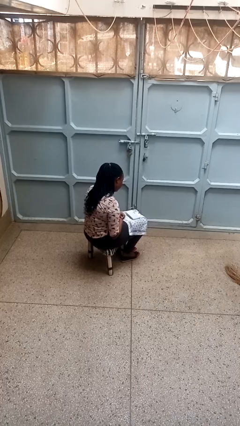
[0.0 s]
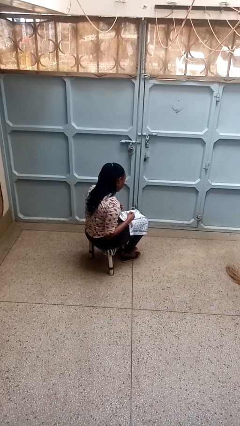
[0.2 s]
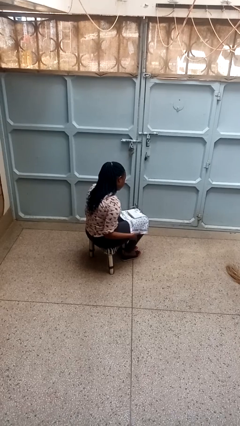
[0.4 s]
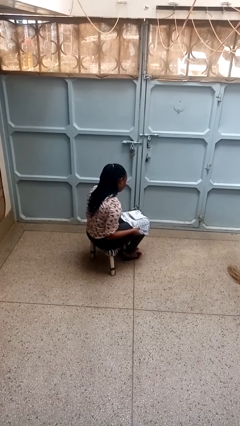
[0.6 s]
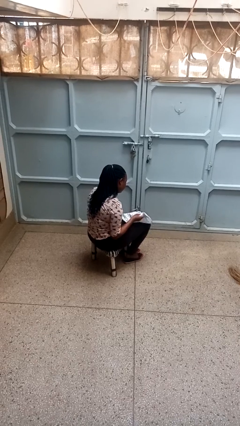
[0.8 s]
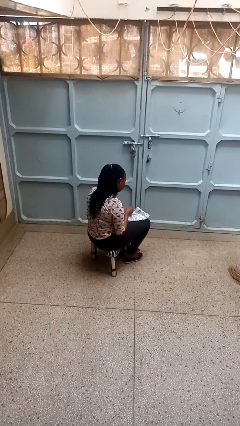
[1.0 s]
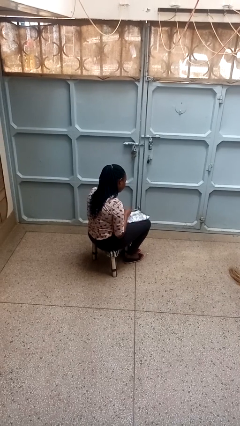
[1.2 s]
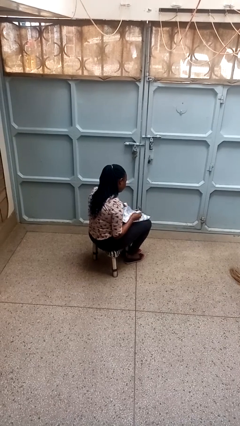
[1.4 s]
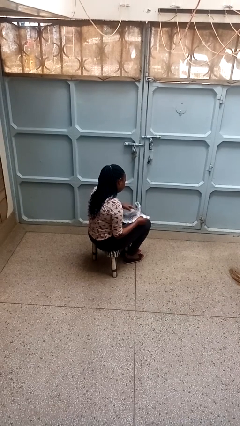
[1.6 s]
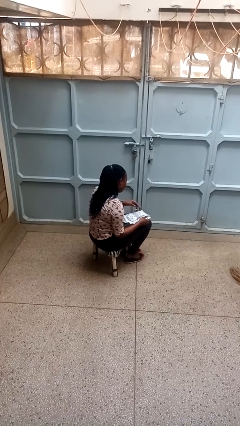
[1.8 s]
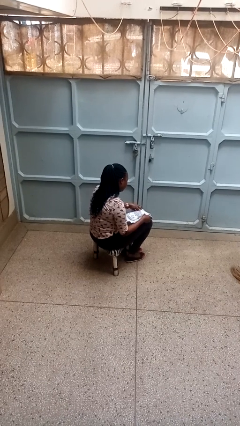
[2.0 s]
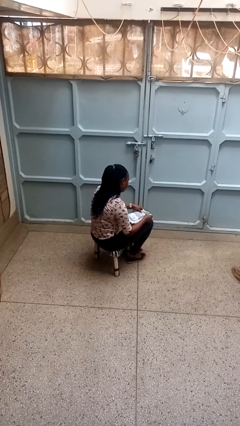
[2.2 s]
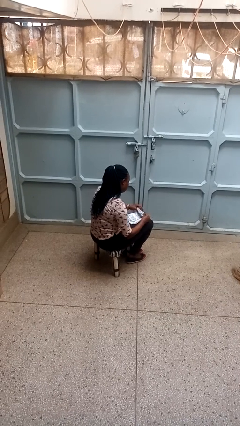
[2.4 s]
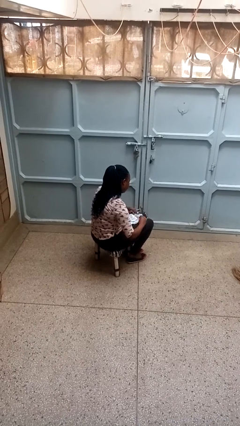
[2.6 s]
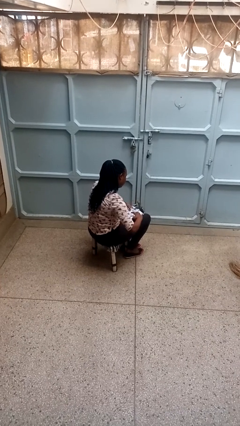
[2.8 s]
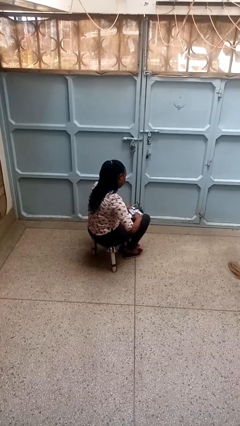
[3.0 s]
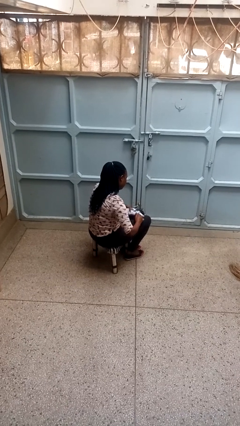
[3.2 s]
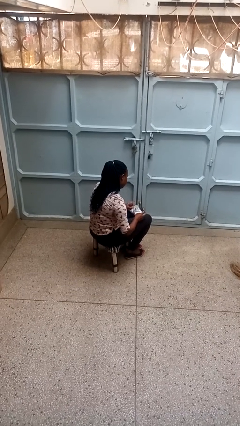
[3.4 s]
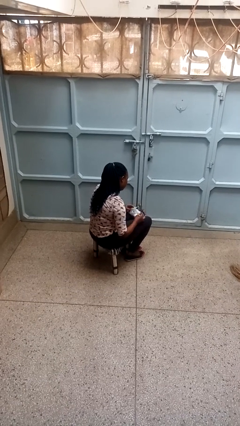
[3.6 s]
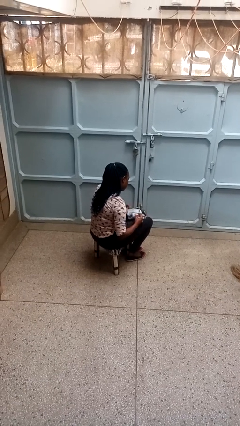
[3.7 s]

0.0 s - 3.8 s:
person wraps box

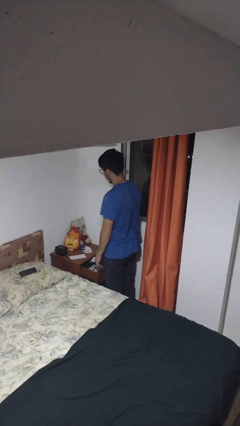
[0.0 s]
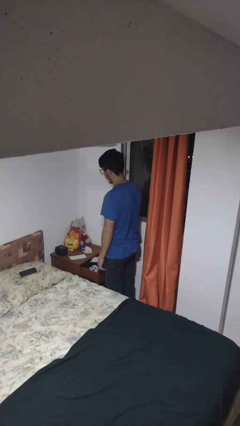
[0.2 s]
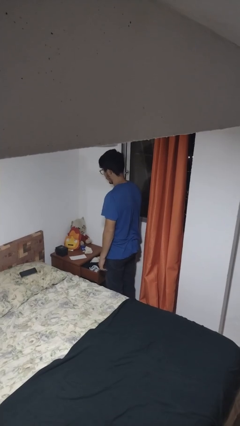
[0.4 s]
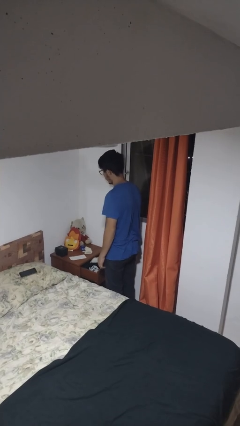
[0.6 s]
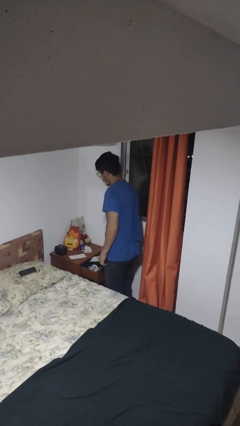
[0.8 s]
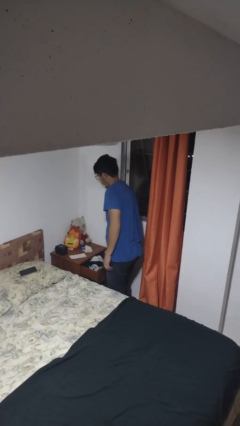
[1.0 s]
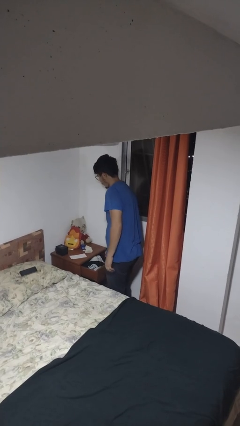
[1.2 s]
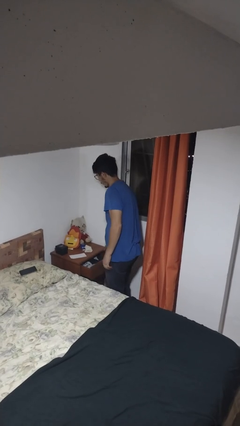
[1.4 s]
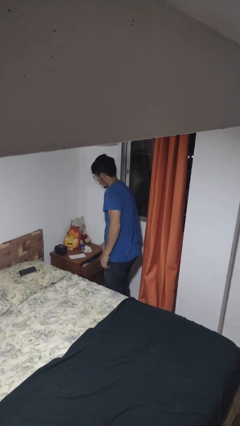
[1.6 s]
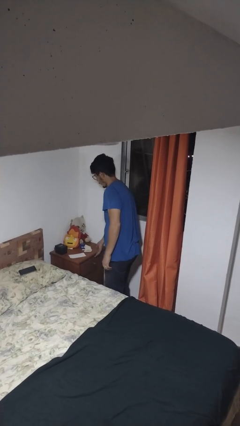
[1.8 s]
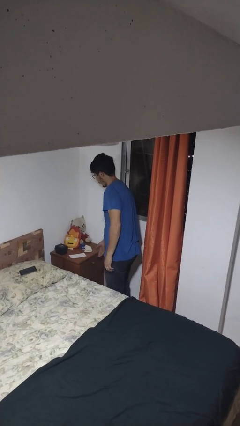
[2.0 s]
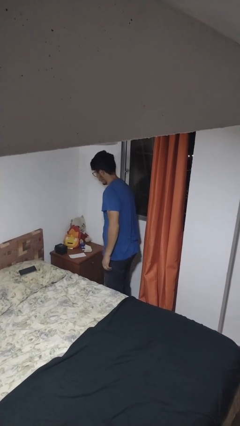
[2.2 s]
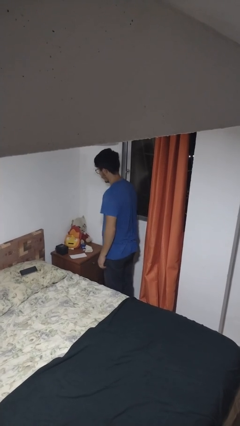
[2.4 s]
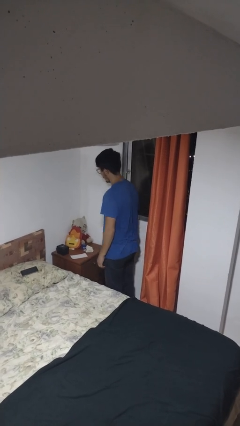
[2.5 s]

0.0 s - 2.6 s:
person closes dresser drawer

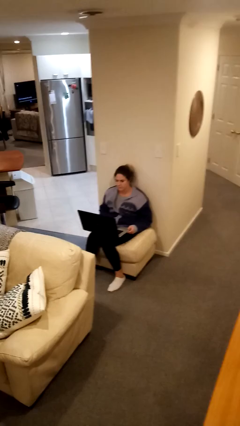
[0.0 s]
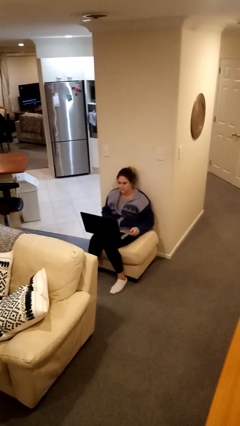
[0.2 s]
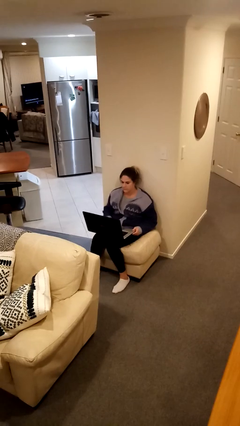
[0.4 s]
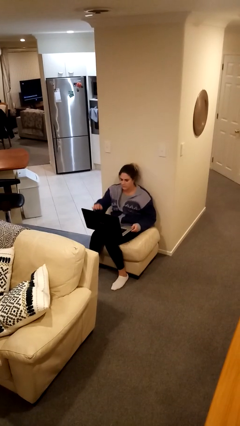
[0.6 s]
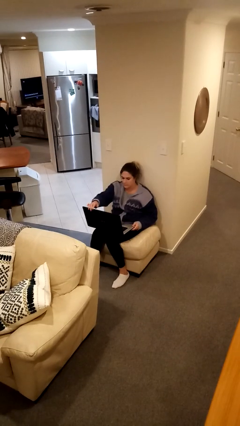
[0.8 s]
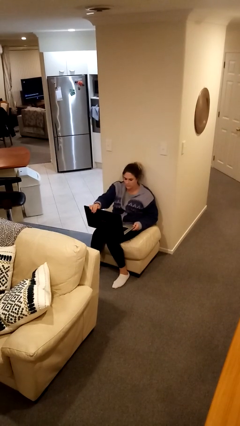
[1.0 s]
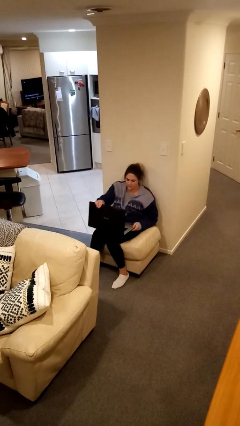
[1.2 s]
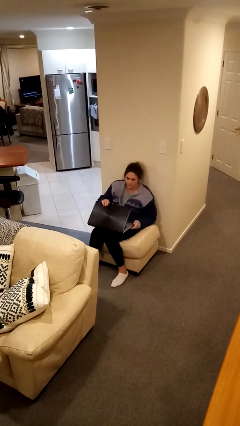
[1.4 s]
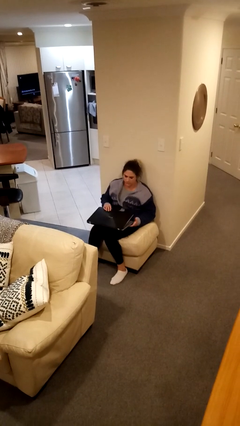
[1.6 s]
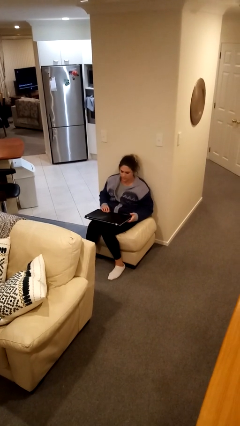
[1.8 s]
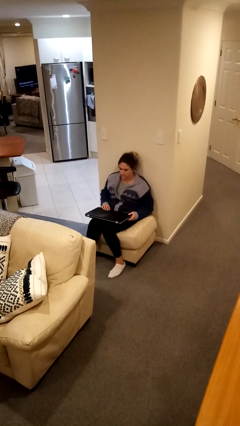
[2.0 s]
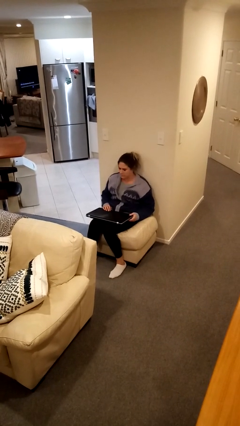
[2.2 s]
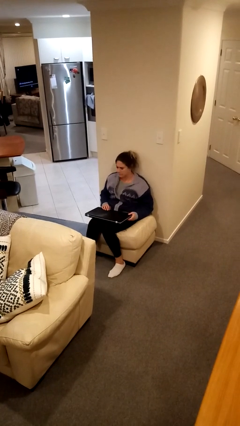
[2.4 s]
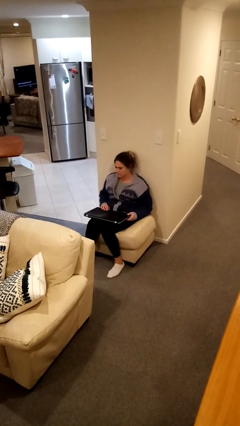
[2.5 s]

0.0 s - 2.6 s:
person closes laptop

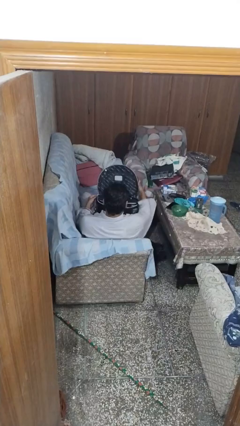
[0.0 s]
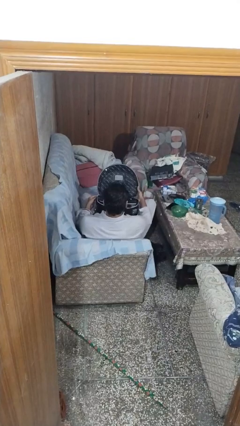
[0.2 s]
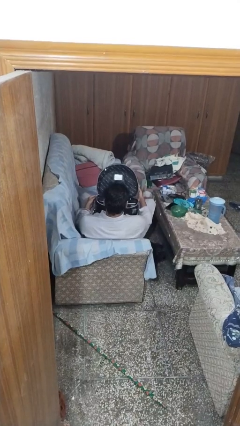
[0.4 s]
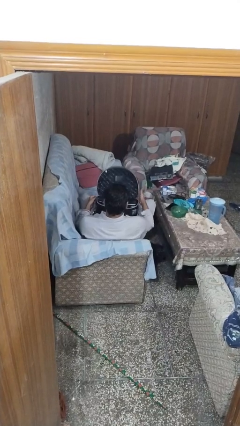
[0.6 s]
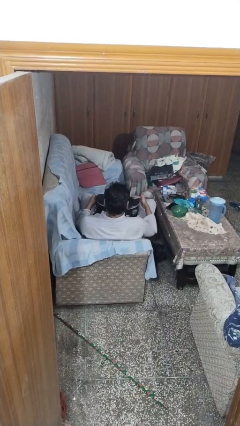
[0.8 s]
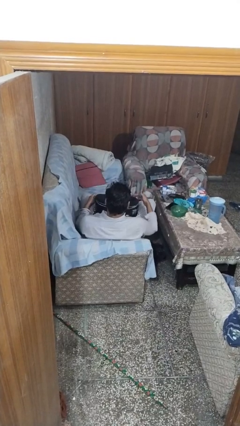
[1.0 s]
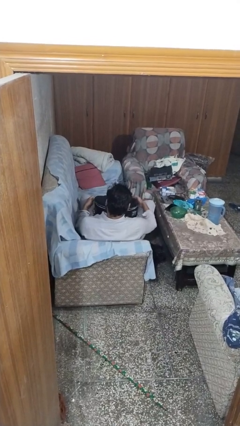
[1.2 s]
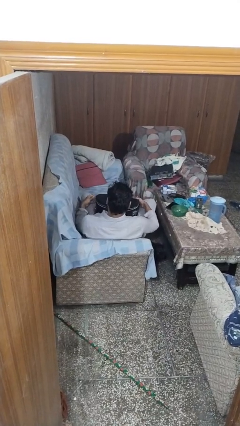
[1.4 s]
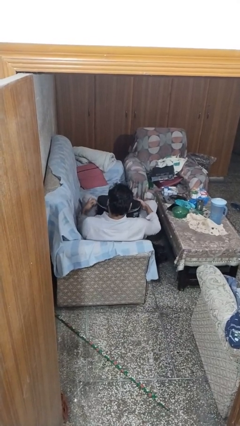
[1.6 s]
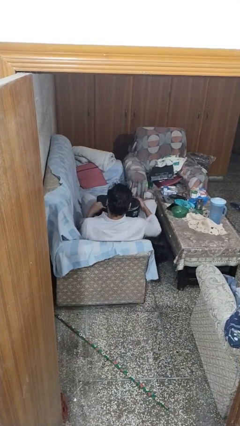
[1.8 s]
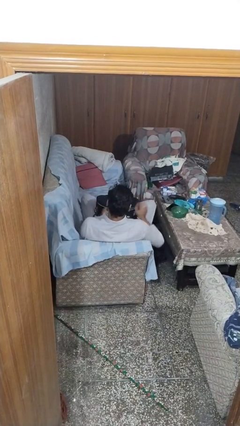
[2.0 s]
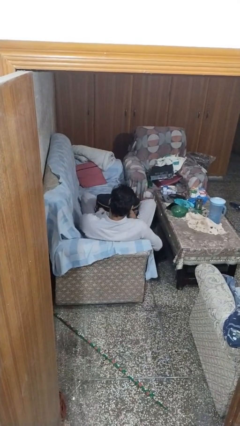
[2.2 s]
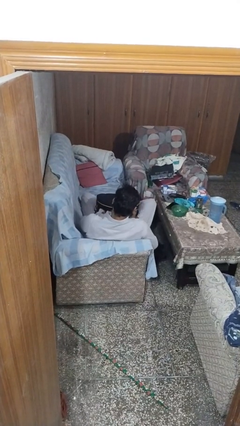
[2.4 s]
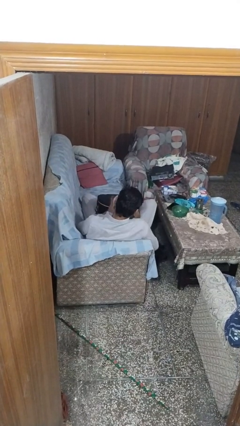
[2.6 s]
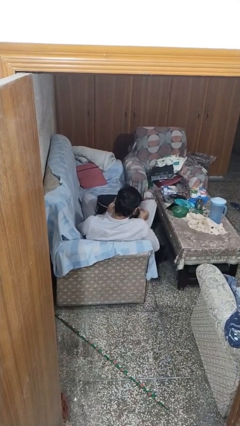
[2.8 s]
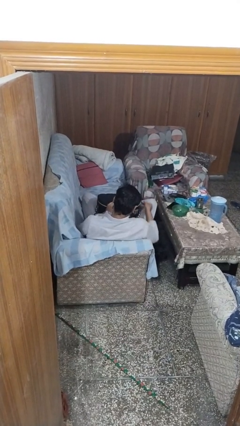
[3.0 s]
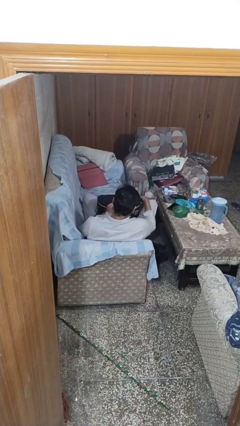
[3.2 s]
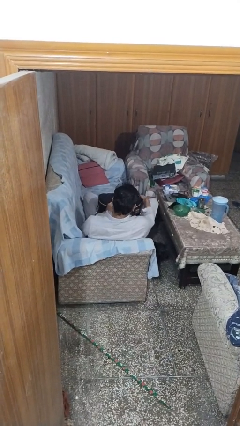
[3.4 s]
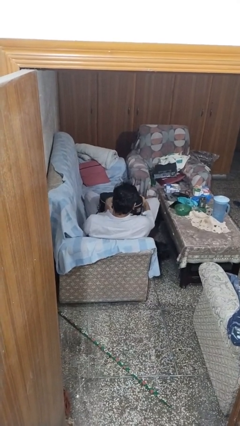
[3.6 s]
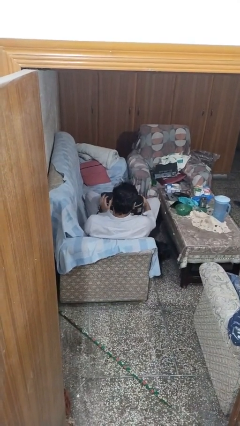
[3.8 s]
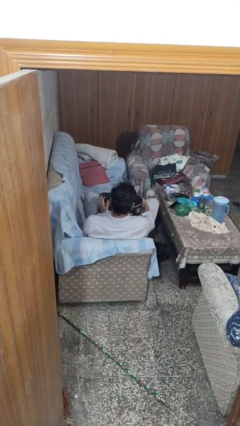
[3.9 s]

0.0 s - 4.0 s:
person closes suitcase

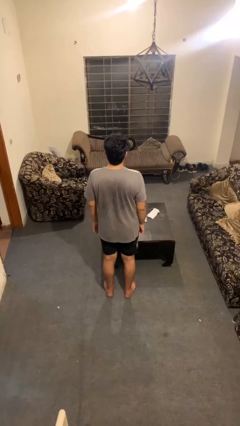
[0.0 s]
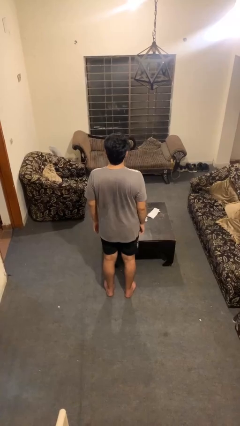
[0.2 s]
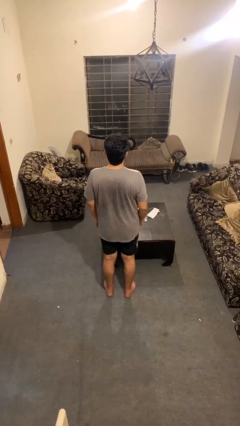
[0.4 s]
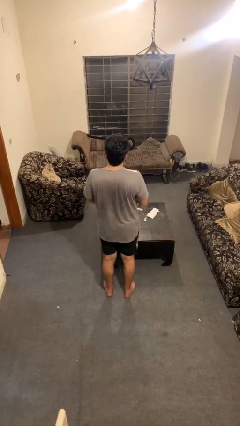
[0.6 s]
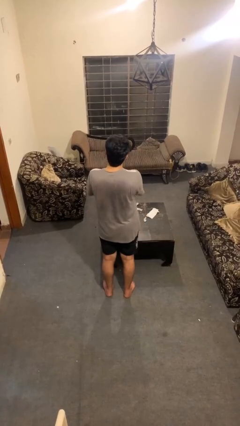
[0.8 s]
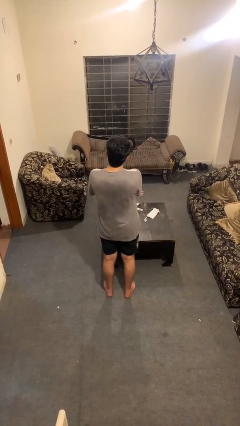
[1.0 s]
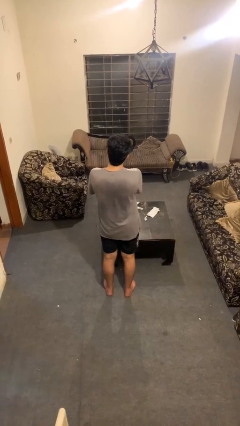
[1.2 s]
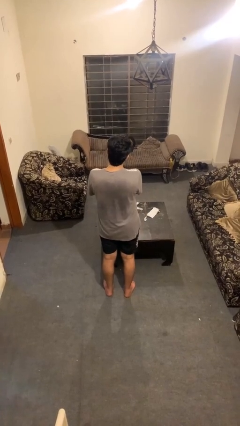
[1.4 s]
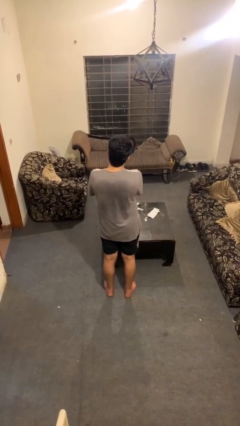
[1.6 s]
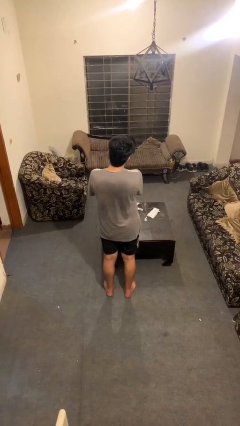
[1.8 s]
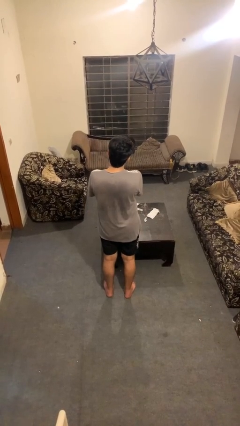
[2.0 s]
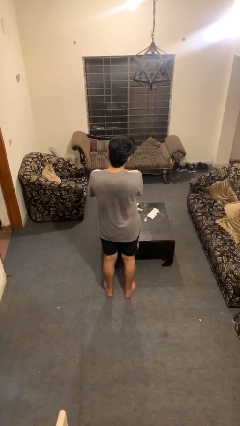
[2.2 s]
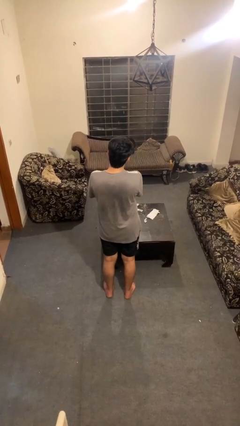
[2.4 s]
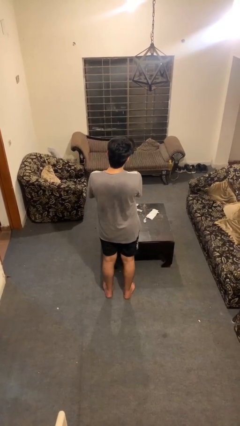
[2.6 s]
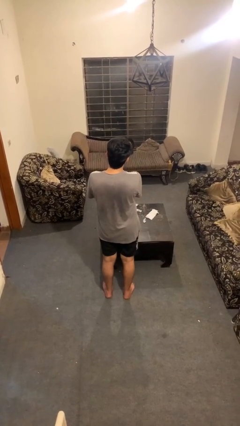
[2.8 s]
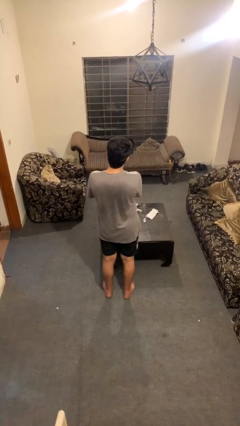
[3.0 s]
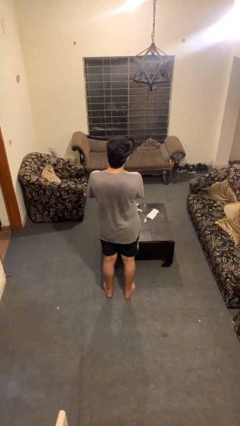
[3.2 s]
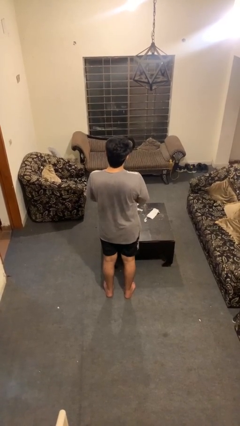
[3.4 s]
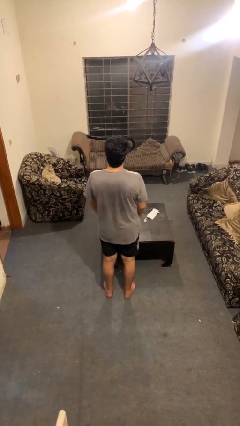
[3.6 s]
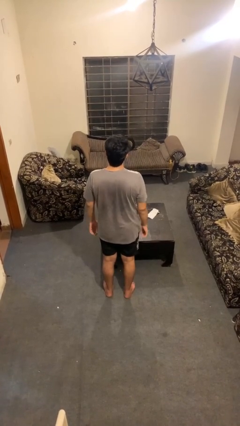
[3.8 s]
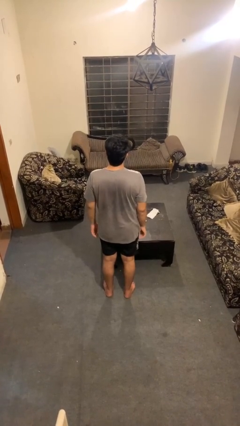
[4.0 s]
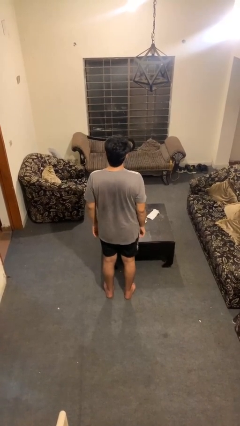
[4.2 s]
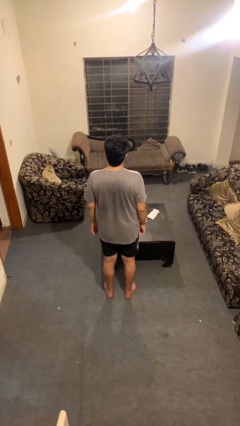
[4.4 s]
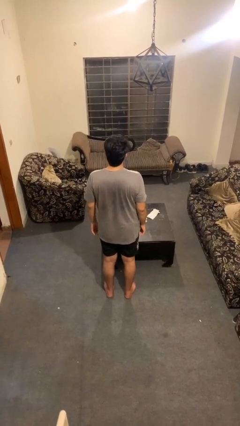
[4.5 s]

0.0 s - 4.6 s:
person strokes chin
